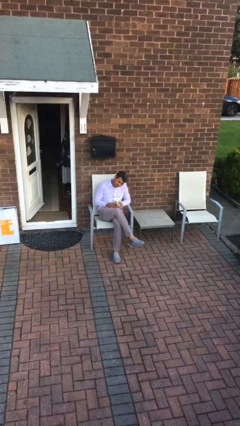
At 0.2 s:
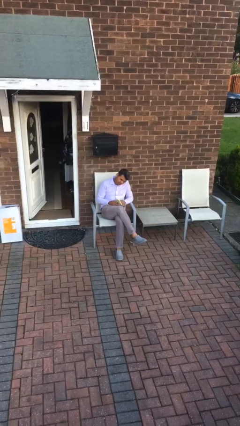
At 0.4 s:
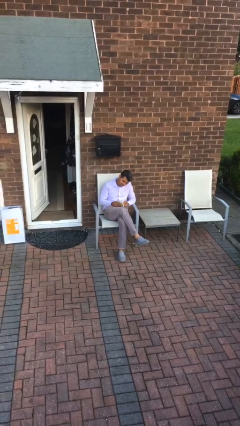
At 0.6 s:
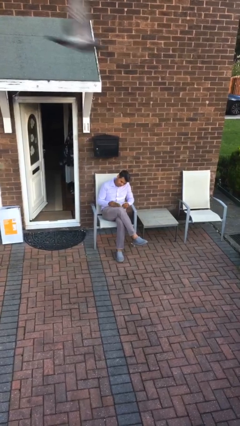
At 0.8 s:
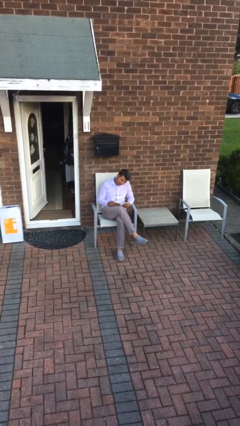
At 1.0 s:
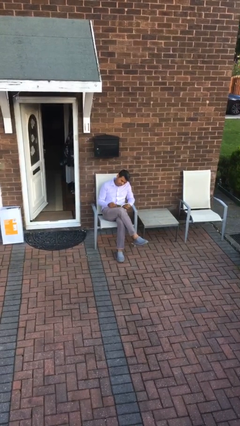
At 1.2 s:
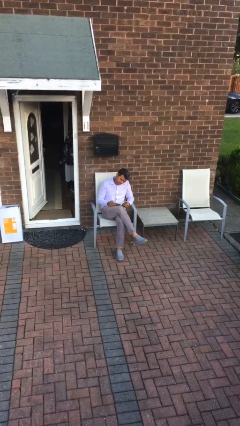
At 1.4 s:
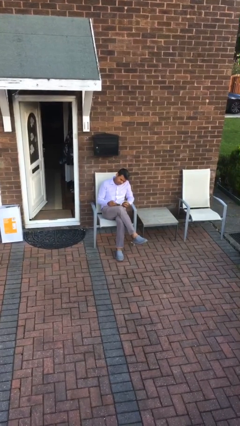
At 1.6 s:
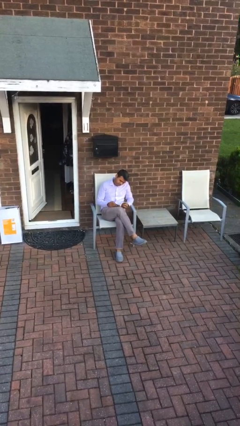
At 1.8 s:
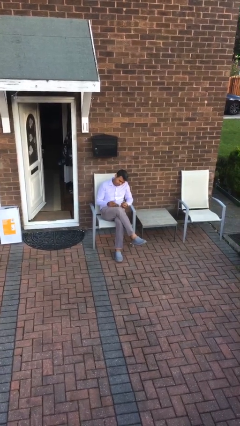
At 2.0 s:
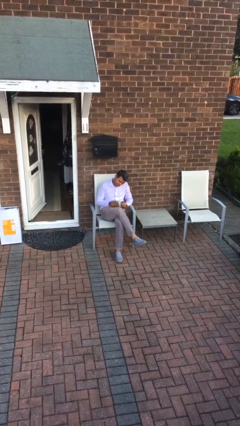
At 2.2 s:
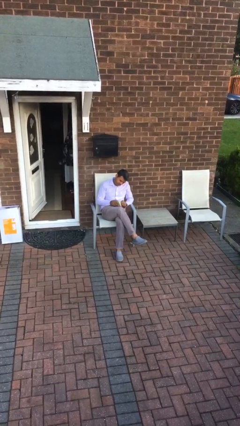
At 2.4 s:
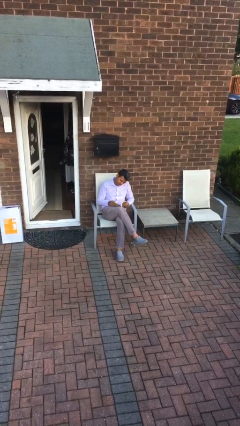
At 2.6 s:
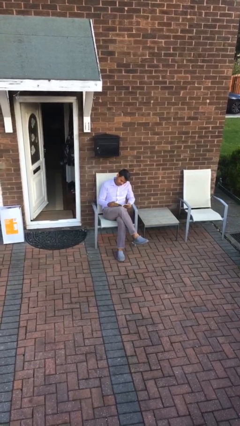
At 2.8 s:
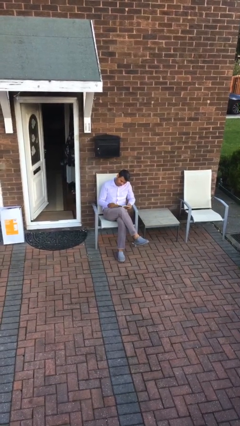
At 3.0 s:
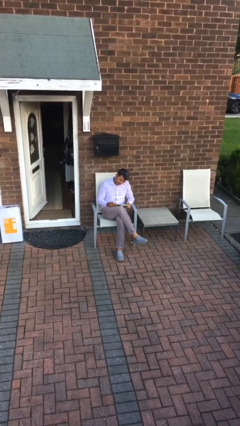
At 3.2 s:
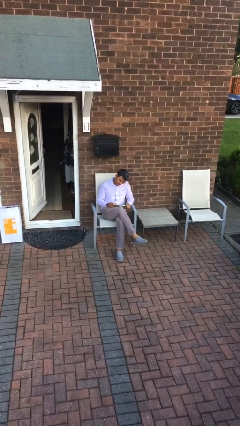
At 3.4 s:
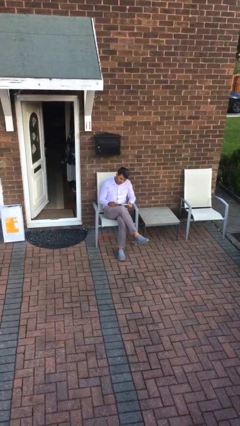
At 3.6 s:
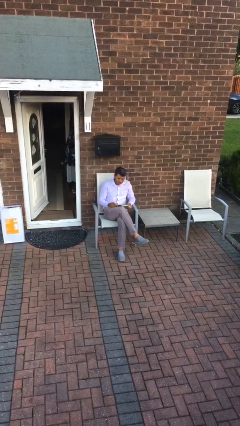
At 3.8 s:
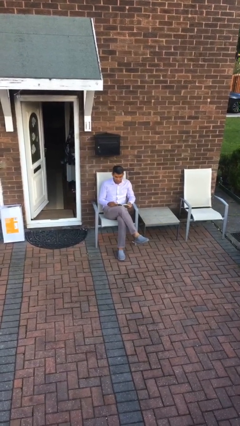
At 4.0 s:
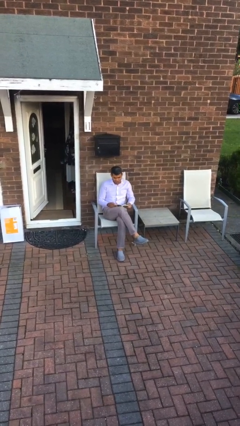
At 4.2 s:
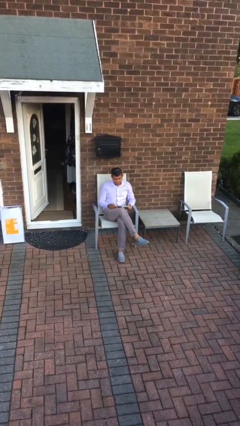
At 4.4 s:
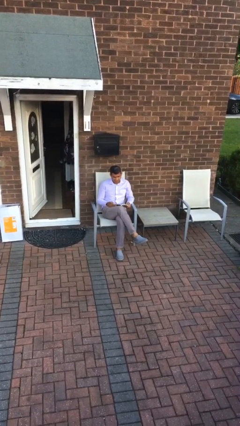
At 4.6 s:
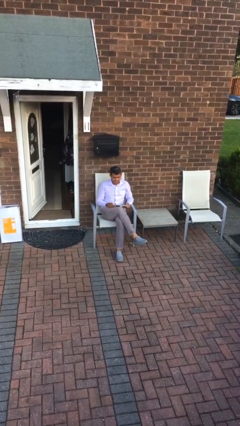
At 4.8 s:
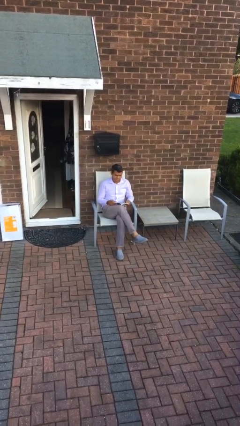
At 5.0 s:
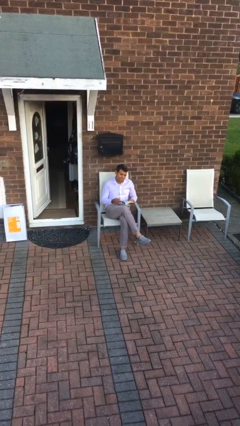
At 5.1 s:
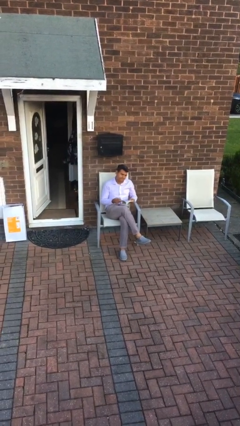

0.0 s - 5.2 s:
person reads document

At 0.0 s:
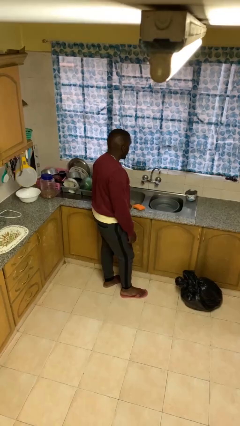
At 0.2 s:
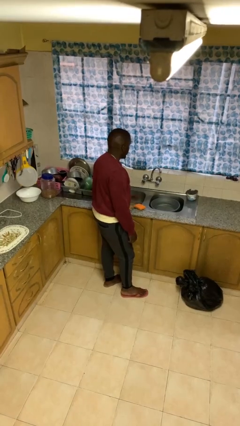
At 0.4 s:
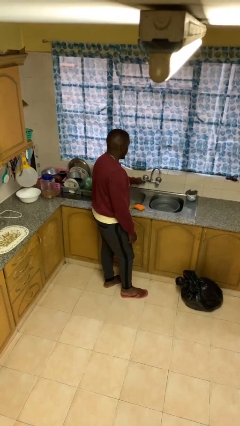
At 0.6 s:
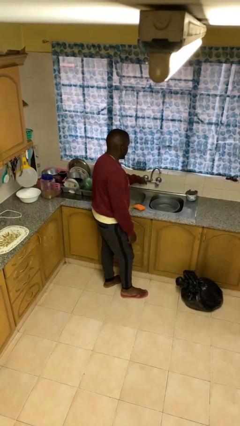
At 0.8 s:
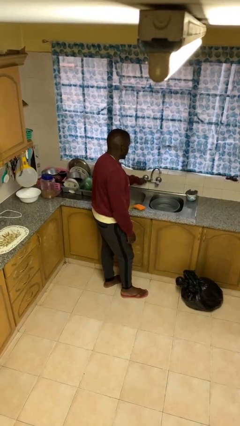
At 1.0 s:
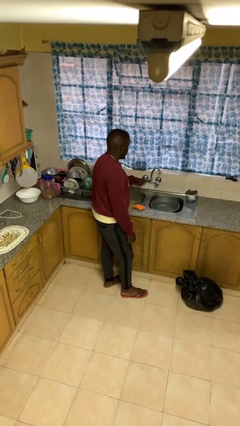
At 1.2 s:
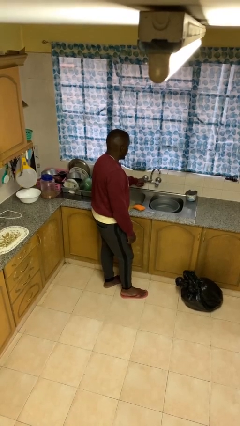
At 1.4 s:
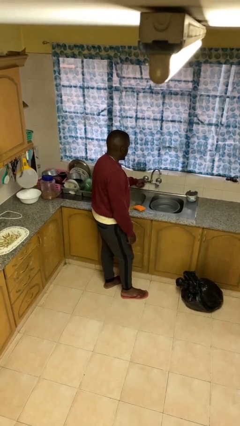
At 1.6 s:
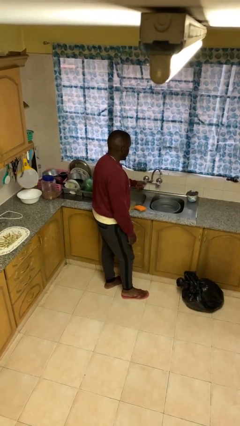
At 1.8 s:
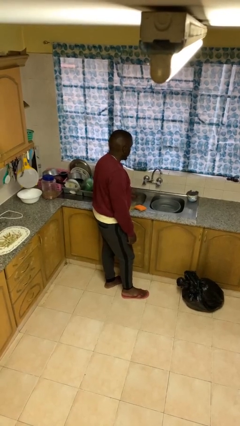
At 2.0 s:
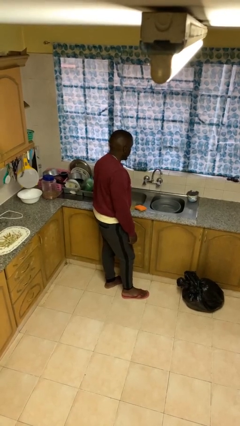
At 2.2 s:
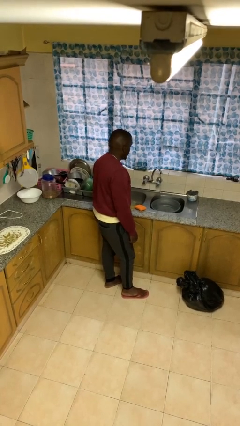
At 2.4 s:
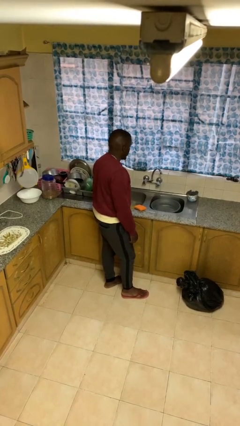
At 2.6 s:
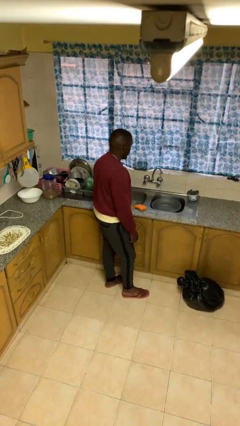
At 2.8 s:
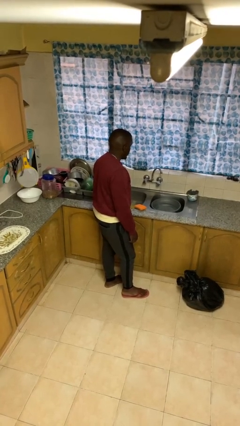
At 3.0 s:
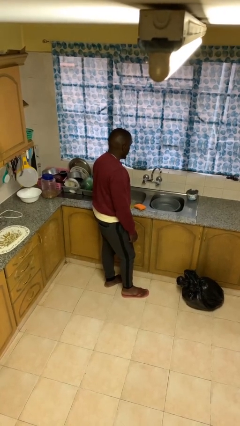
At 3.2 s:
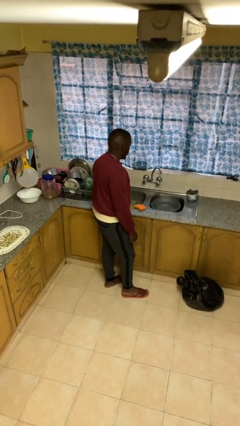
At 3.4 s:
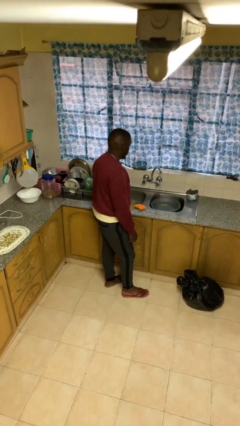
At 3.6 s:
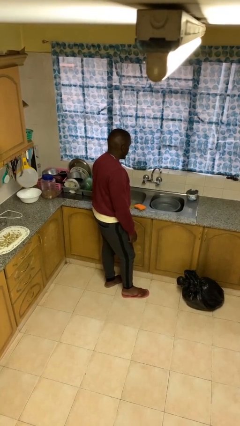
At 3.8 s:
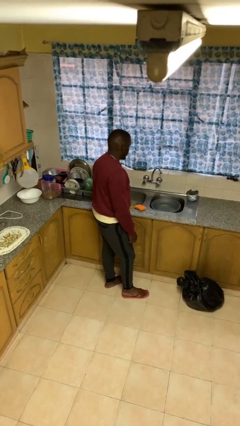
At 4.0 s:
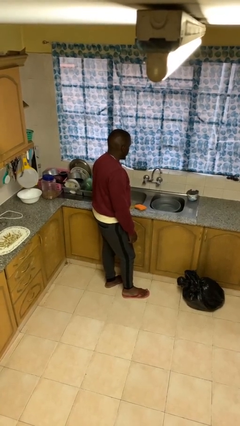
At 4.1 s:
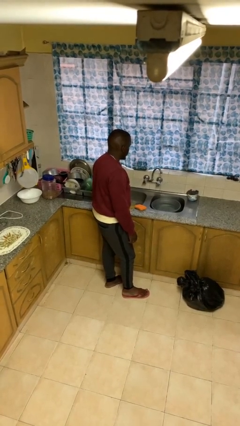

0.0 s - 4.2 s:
person turns on faucet

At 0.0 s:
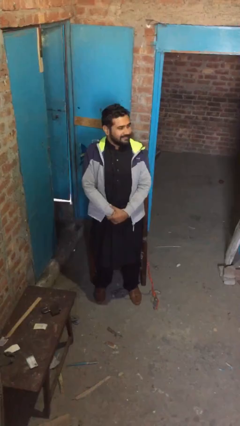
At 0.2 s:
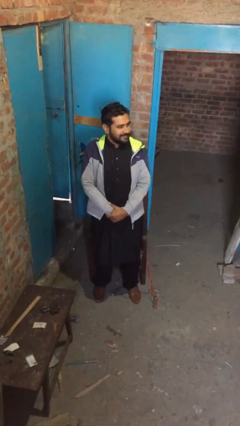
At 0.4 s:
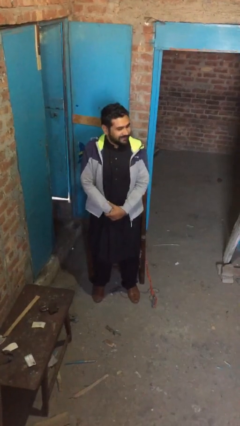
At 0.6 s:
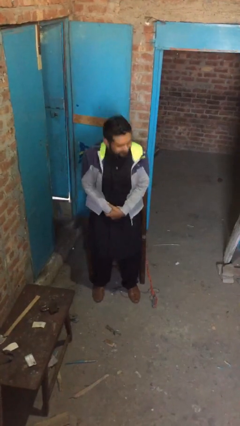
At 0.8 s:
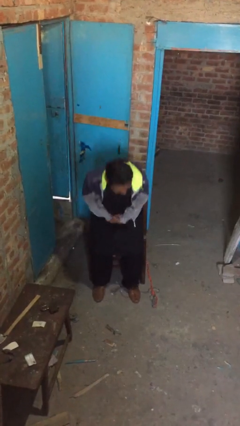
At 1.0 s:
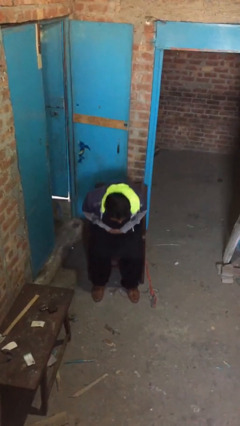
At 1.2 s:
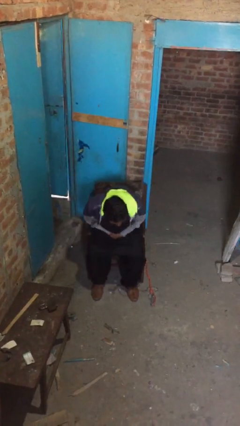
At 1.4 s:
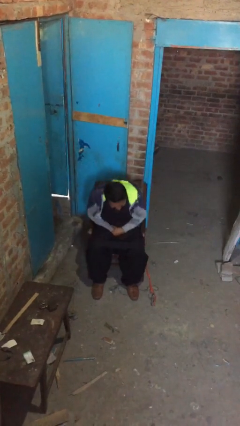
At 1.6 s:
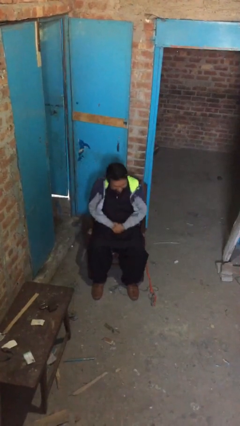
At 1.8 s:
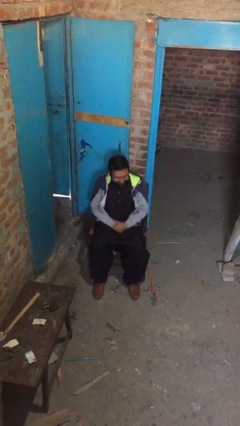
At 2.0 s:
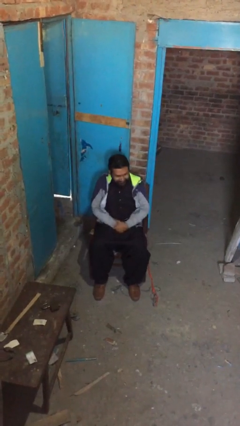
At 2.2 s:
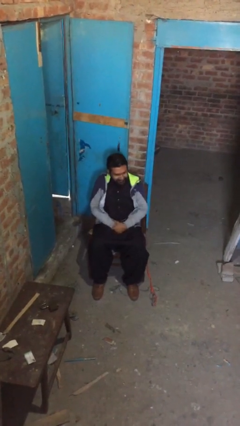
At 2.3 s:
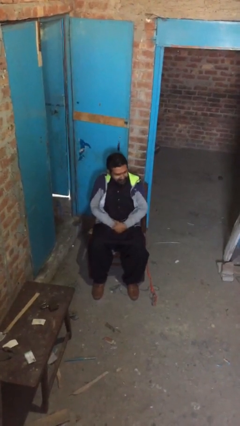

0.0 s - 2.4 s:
person sits down

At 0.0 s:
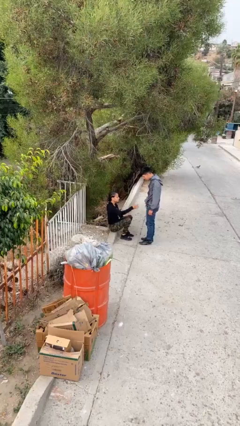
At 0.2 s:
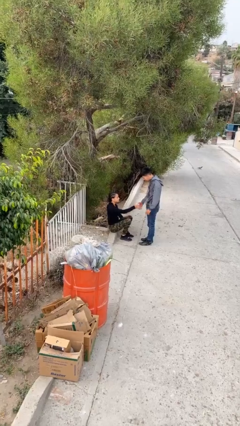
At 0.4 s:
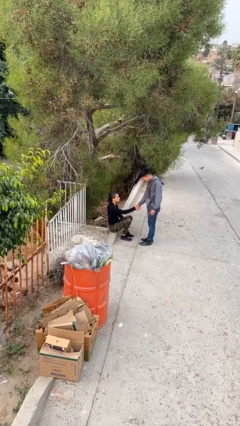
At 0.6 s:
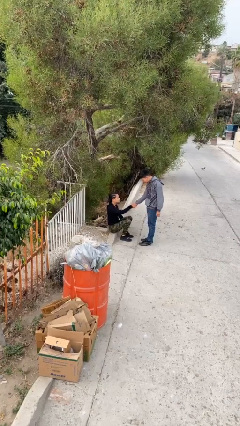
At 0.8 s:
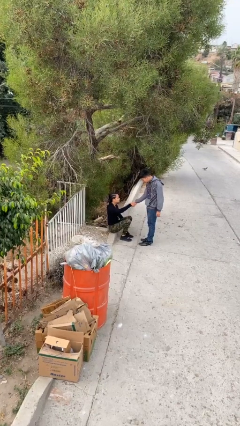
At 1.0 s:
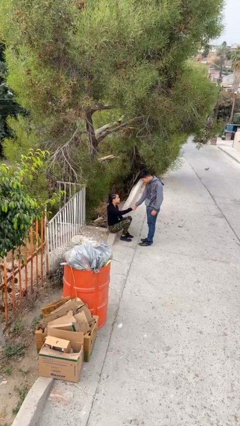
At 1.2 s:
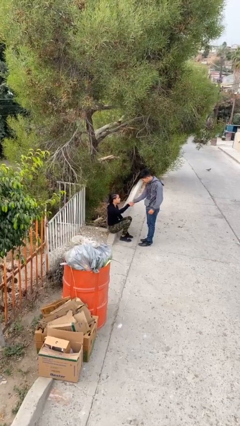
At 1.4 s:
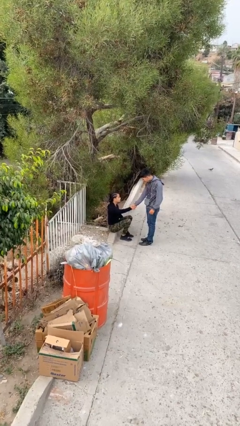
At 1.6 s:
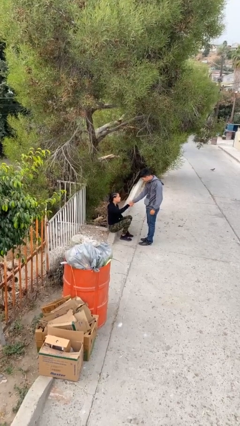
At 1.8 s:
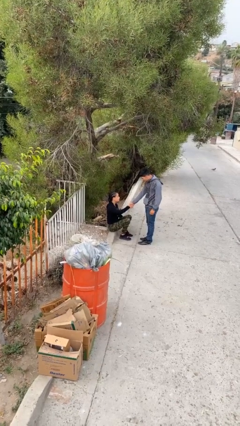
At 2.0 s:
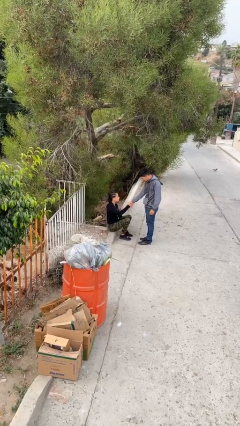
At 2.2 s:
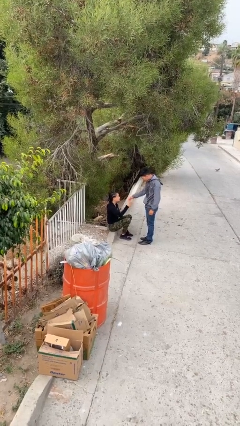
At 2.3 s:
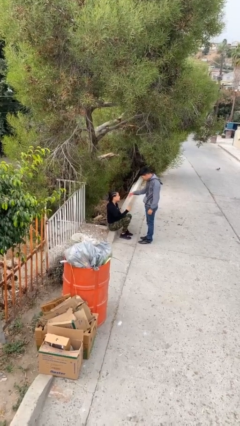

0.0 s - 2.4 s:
person shakes hand

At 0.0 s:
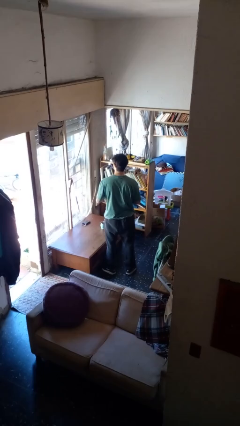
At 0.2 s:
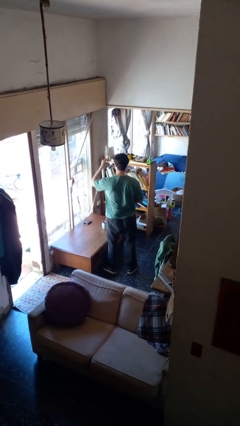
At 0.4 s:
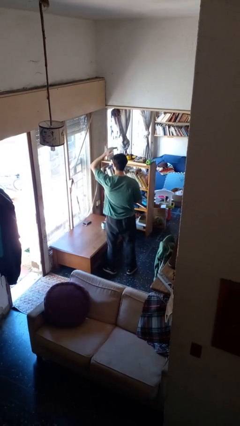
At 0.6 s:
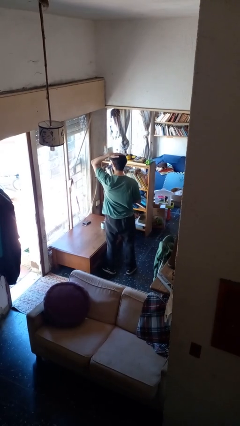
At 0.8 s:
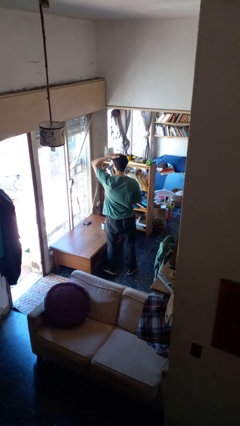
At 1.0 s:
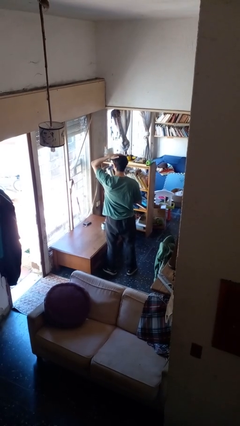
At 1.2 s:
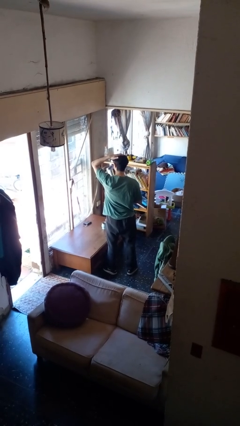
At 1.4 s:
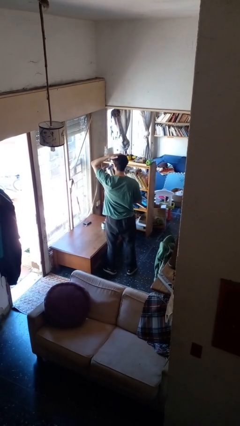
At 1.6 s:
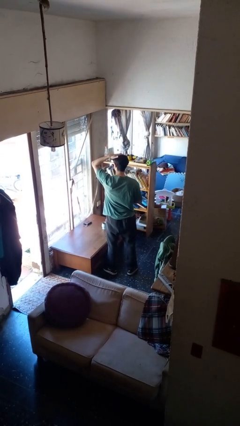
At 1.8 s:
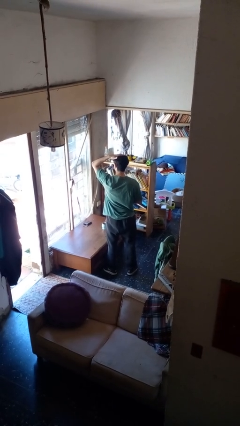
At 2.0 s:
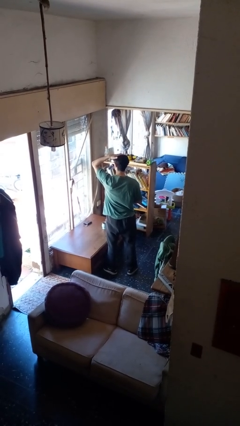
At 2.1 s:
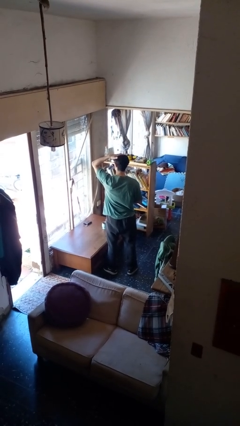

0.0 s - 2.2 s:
person pats head

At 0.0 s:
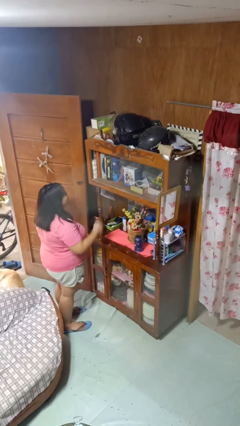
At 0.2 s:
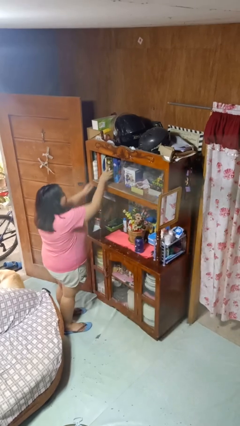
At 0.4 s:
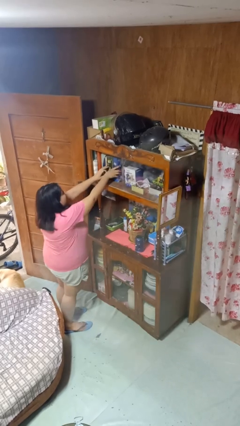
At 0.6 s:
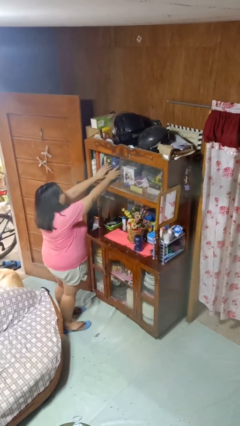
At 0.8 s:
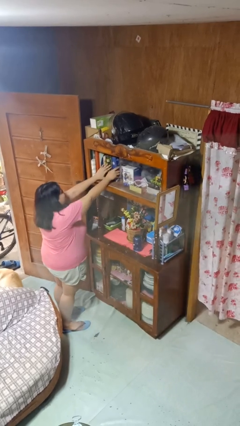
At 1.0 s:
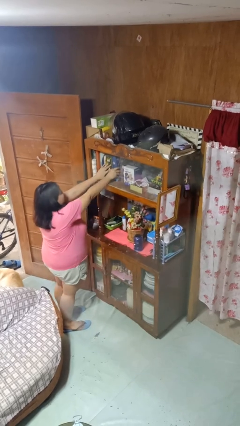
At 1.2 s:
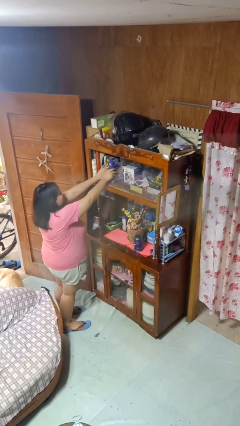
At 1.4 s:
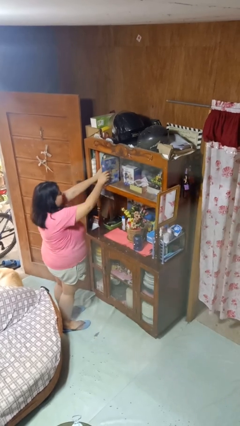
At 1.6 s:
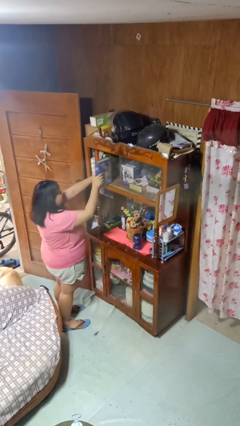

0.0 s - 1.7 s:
person picks up object from shelf
